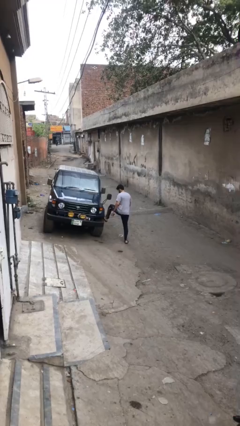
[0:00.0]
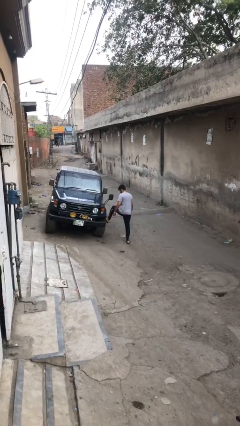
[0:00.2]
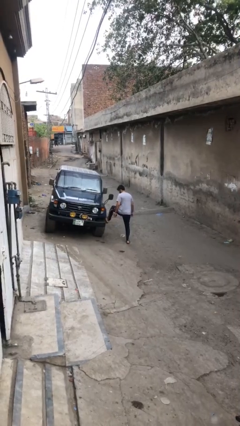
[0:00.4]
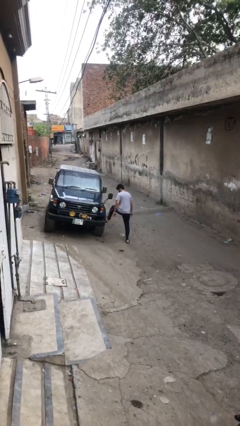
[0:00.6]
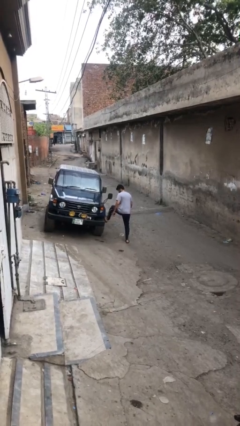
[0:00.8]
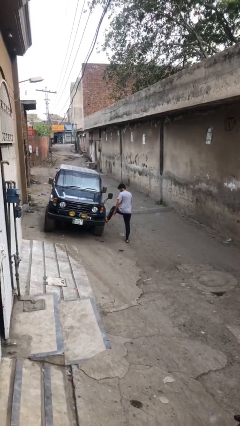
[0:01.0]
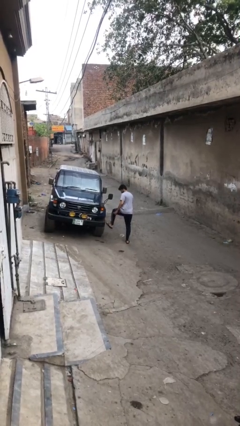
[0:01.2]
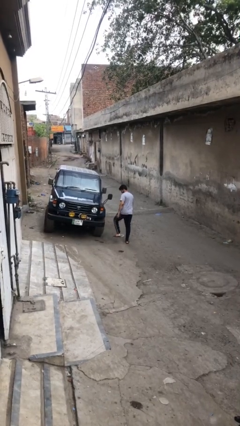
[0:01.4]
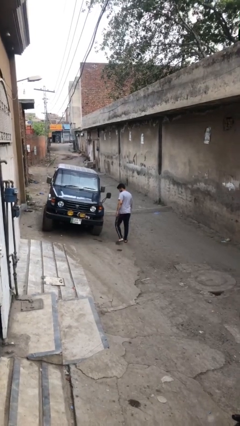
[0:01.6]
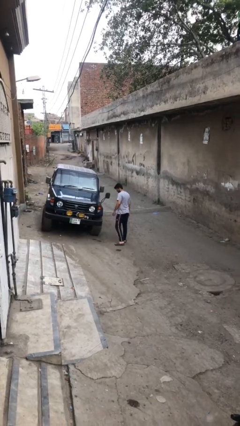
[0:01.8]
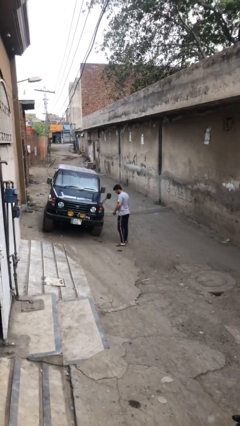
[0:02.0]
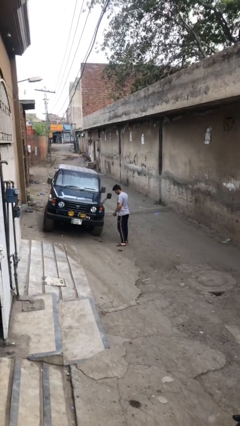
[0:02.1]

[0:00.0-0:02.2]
person kicks car tires

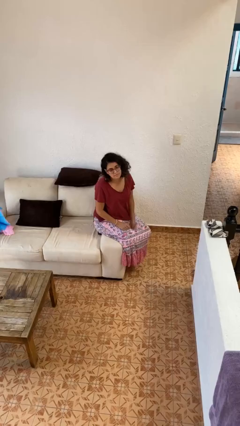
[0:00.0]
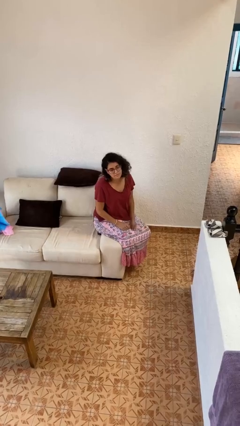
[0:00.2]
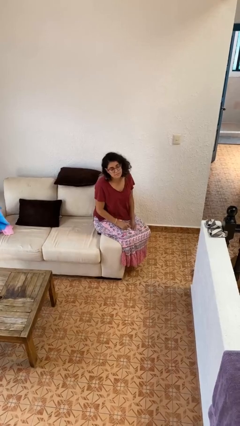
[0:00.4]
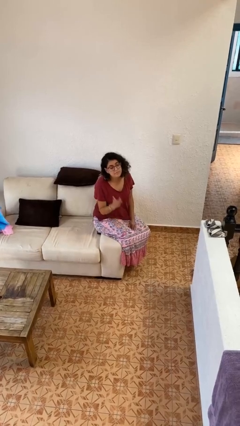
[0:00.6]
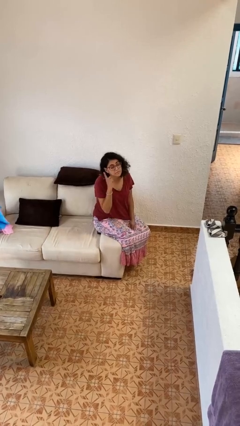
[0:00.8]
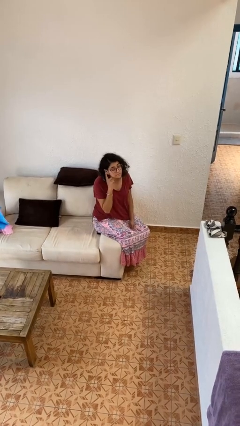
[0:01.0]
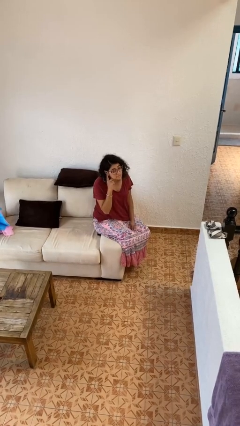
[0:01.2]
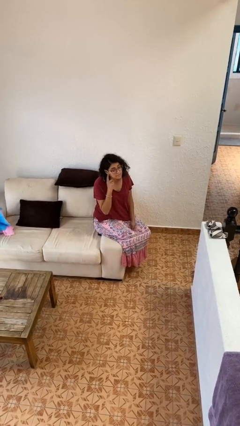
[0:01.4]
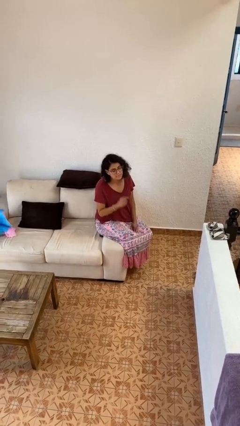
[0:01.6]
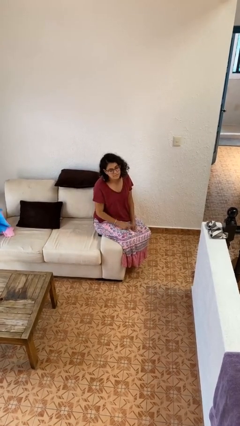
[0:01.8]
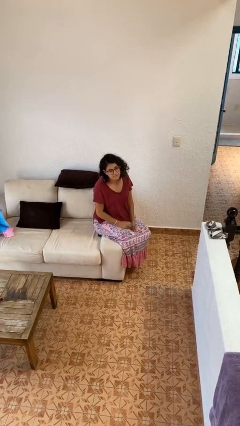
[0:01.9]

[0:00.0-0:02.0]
person gestures listen closely

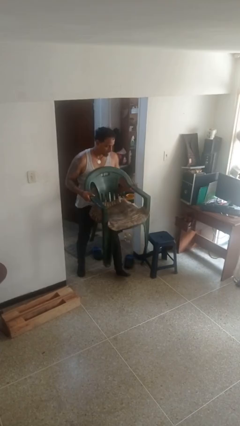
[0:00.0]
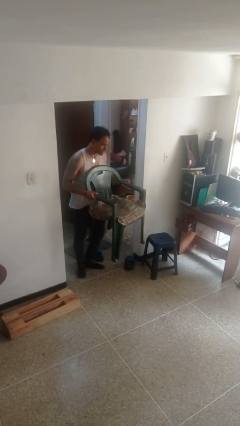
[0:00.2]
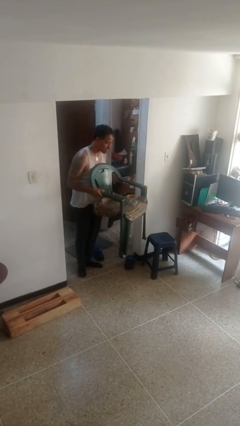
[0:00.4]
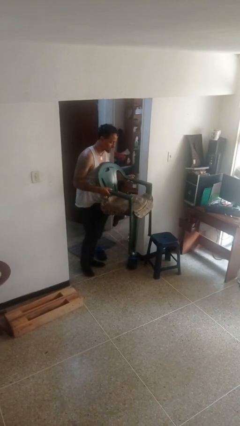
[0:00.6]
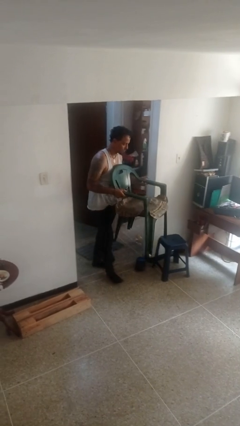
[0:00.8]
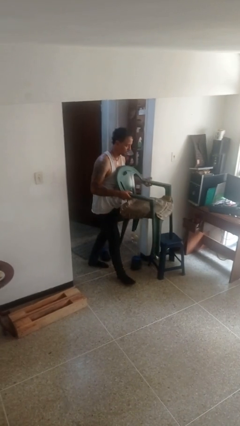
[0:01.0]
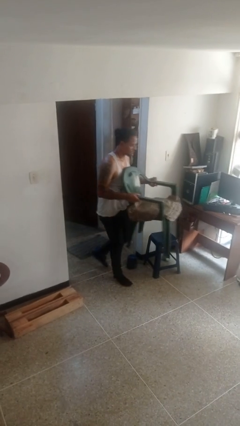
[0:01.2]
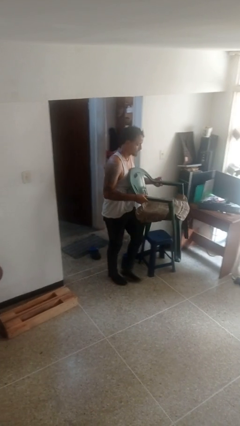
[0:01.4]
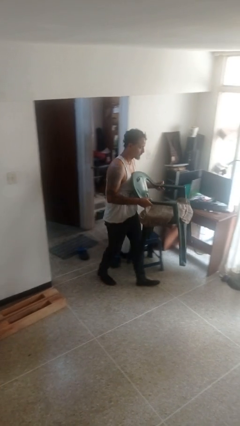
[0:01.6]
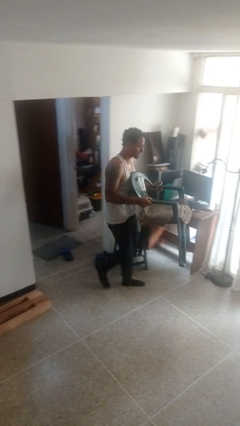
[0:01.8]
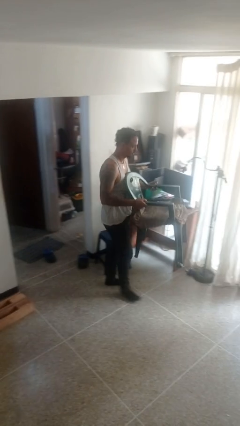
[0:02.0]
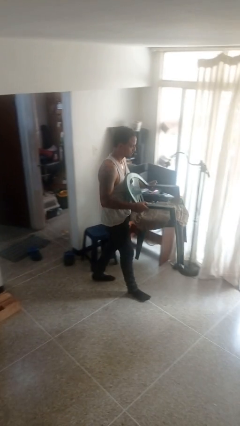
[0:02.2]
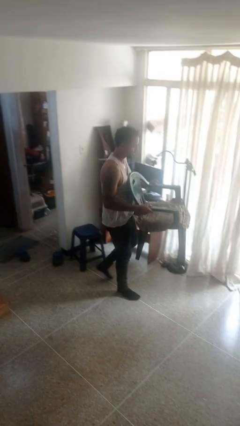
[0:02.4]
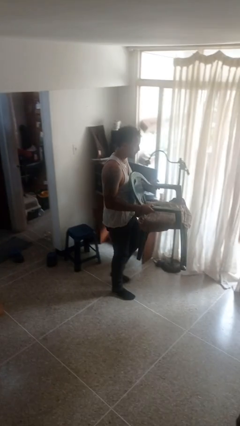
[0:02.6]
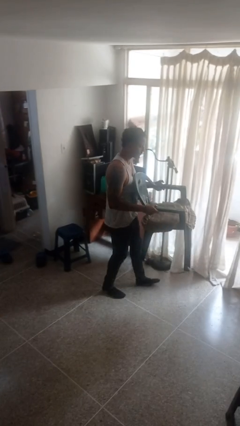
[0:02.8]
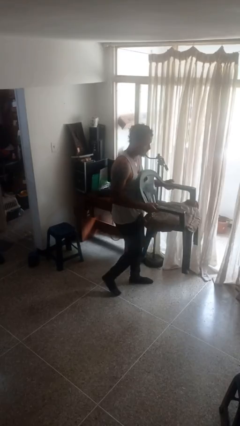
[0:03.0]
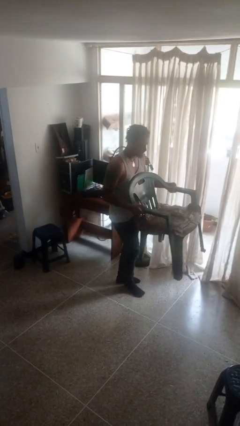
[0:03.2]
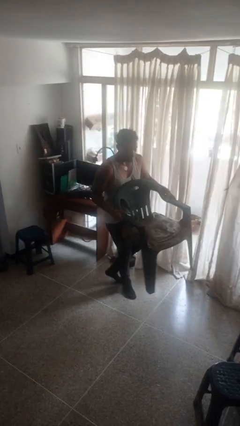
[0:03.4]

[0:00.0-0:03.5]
person carries furniture

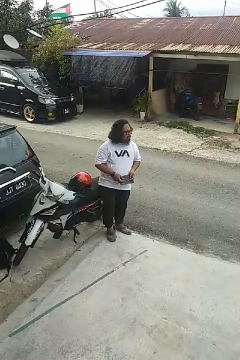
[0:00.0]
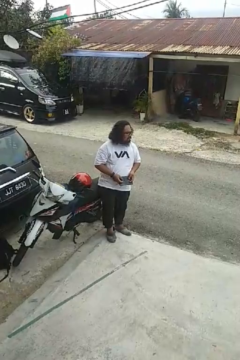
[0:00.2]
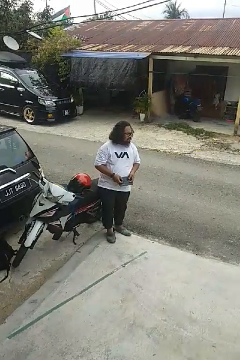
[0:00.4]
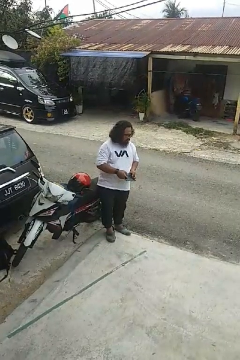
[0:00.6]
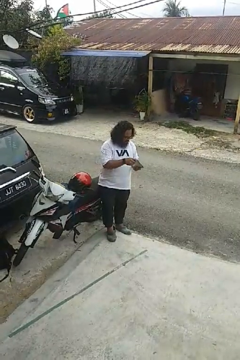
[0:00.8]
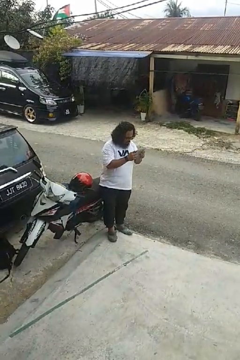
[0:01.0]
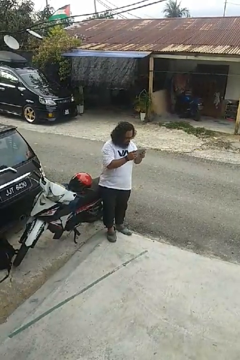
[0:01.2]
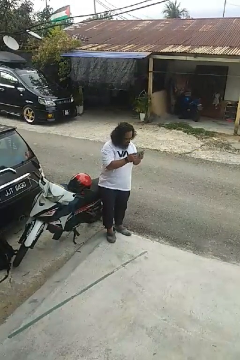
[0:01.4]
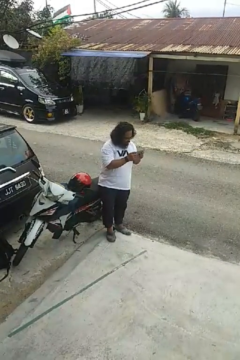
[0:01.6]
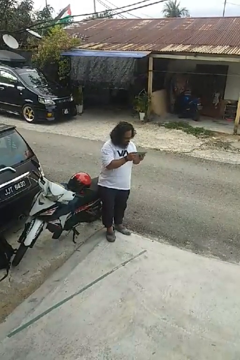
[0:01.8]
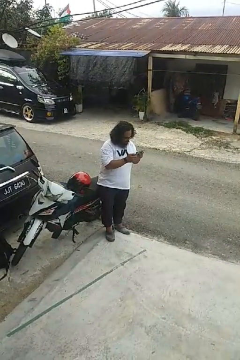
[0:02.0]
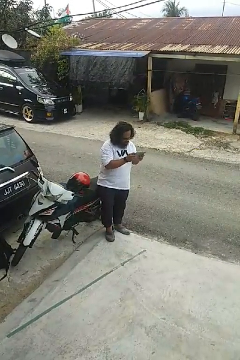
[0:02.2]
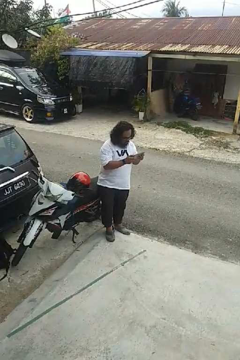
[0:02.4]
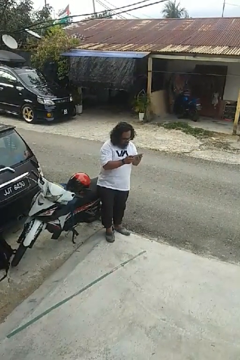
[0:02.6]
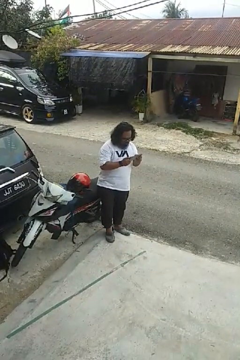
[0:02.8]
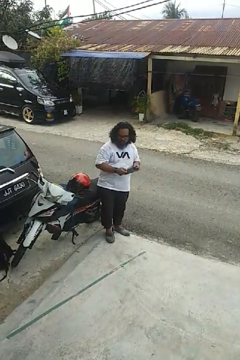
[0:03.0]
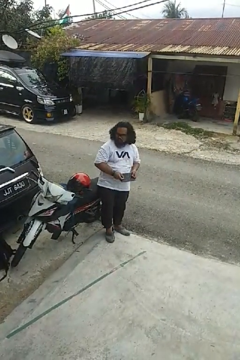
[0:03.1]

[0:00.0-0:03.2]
person interacts with handheld game

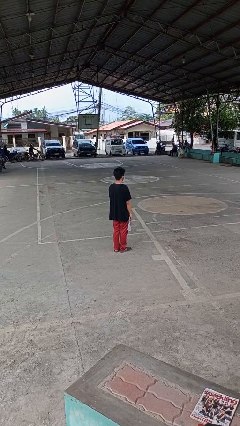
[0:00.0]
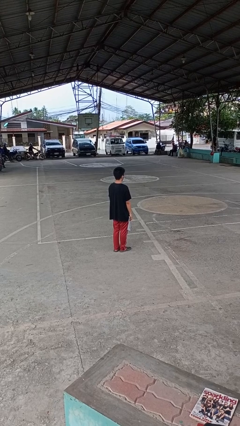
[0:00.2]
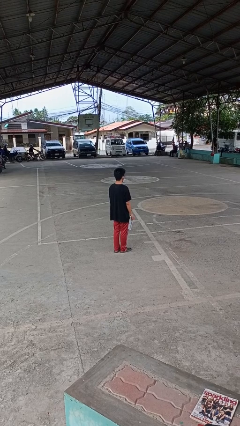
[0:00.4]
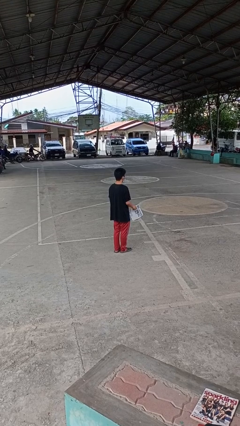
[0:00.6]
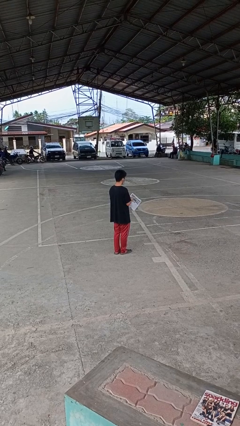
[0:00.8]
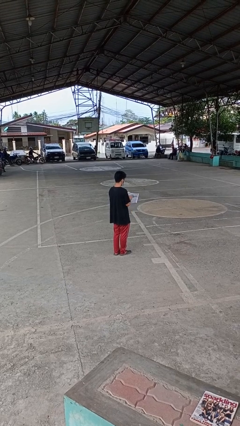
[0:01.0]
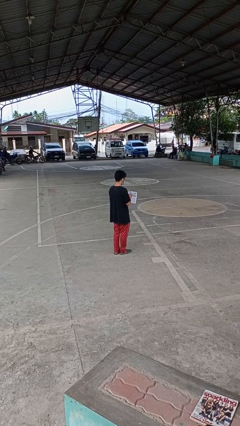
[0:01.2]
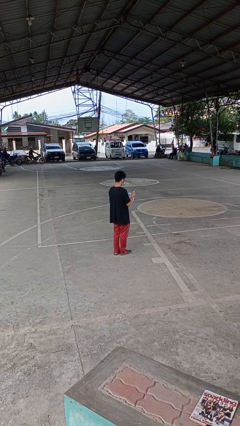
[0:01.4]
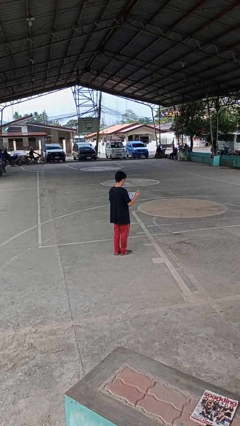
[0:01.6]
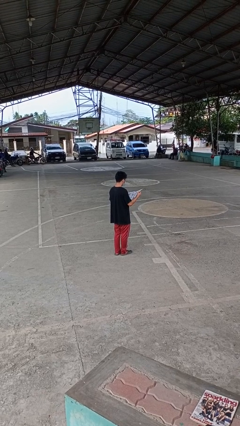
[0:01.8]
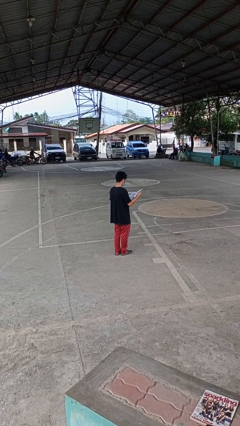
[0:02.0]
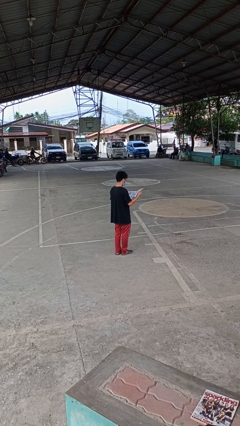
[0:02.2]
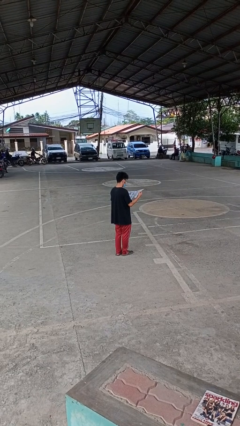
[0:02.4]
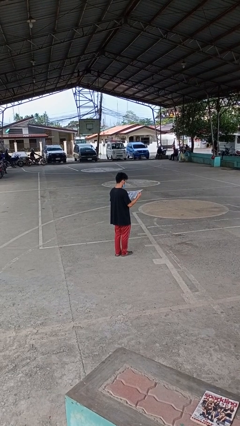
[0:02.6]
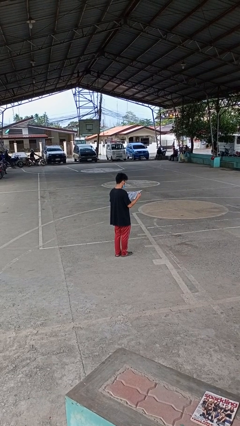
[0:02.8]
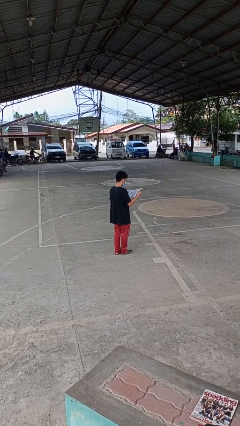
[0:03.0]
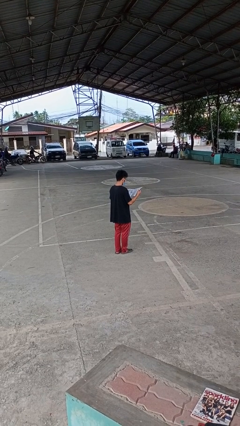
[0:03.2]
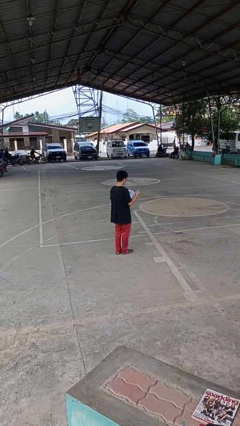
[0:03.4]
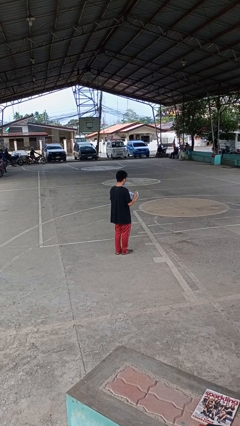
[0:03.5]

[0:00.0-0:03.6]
person reads newspaper

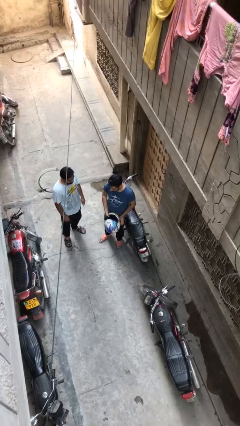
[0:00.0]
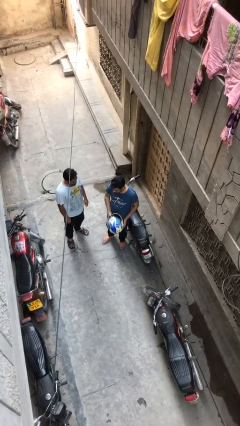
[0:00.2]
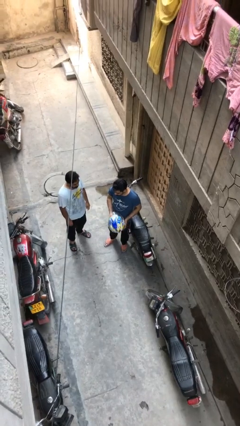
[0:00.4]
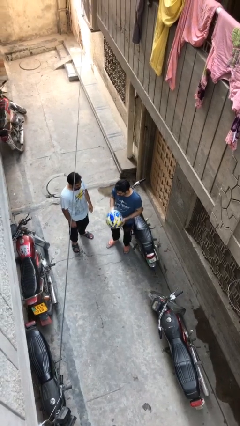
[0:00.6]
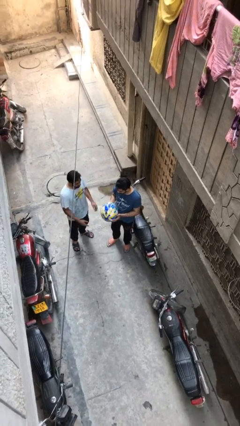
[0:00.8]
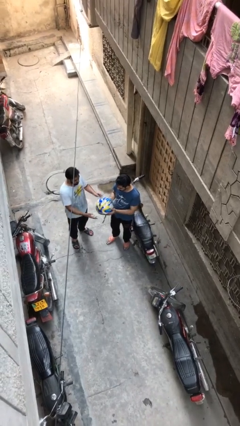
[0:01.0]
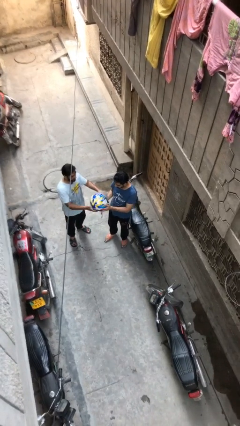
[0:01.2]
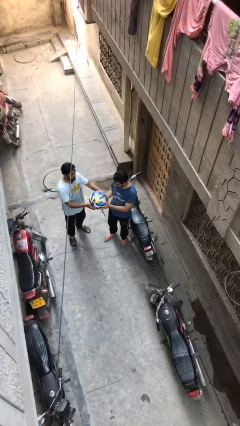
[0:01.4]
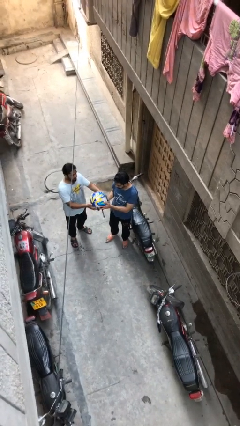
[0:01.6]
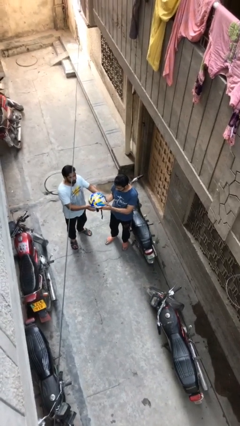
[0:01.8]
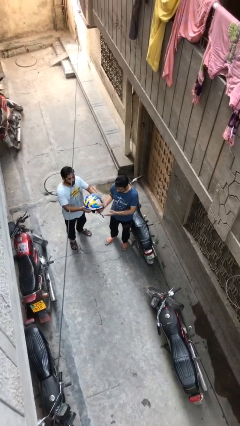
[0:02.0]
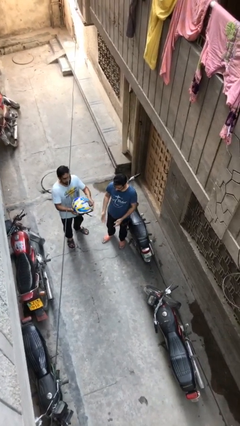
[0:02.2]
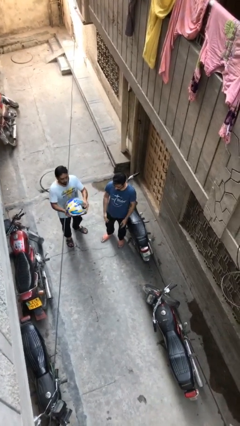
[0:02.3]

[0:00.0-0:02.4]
person transfers object to person

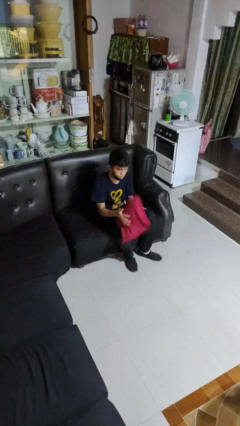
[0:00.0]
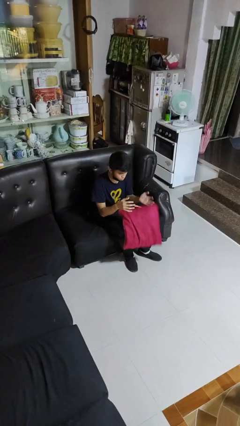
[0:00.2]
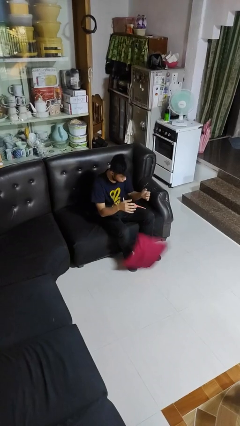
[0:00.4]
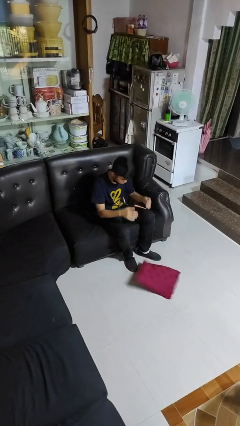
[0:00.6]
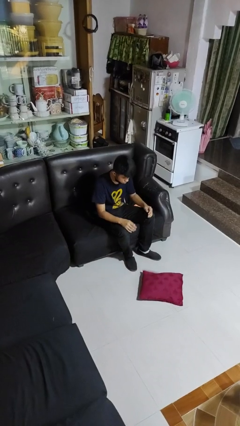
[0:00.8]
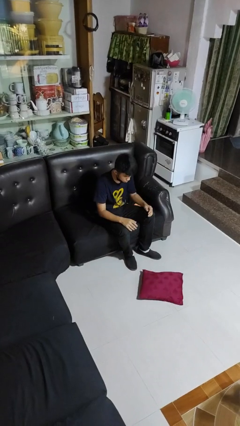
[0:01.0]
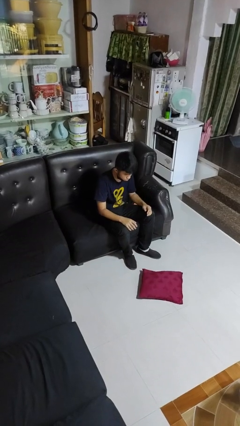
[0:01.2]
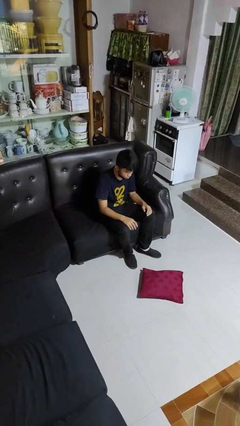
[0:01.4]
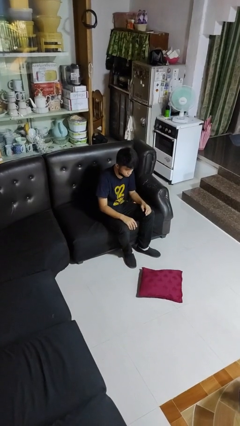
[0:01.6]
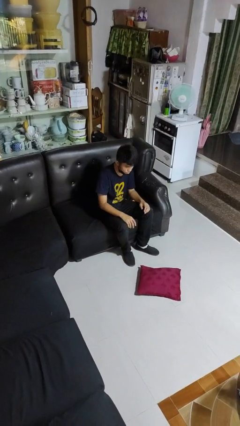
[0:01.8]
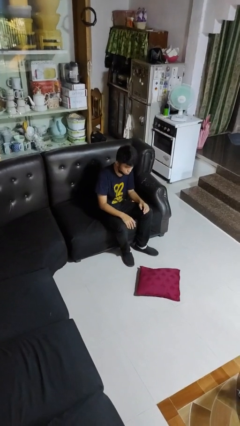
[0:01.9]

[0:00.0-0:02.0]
person drops object
